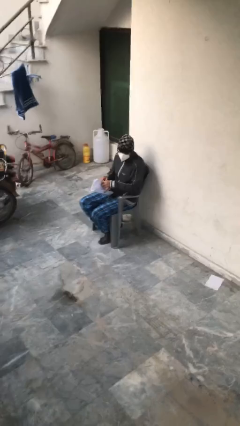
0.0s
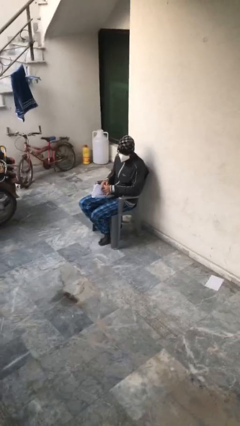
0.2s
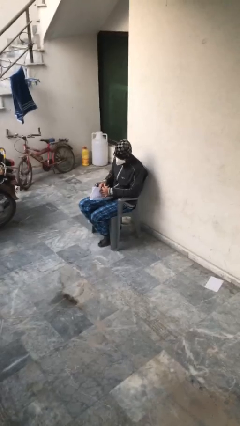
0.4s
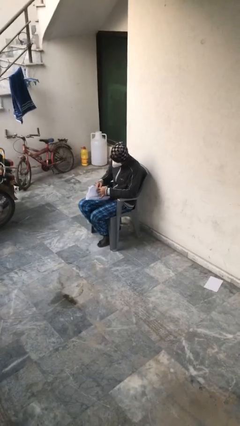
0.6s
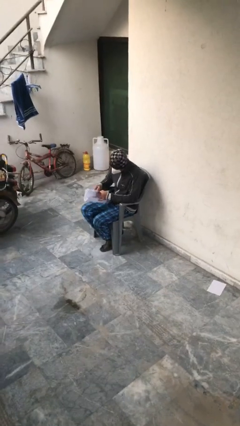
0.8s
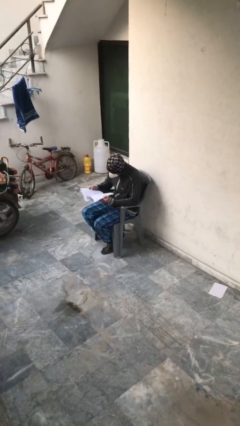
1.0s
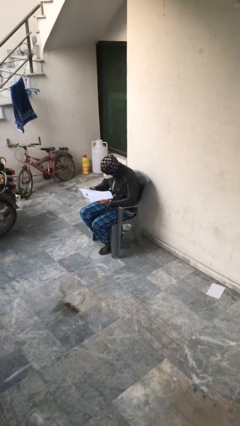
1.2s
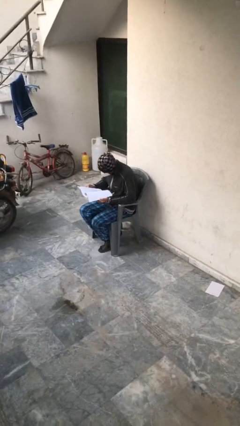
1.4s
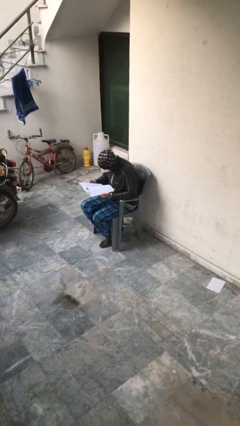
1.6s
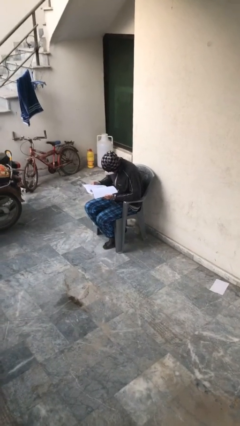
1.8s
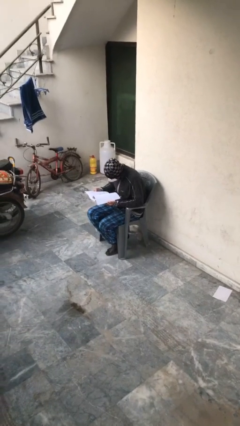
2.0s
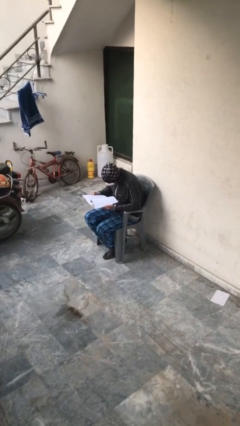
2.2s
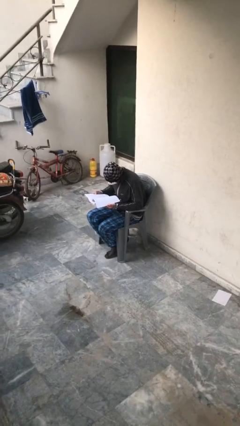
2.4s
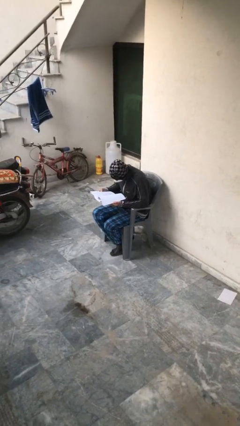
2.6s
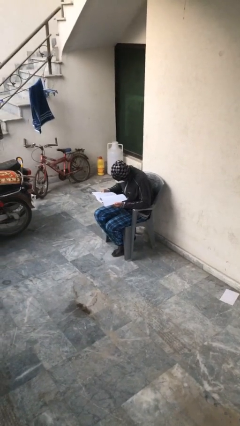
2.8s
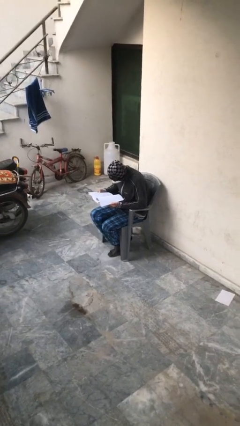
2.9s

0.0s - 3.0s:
person reads document

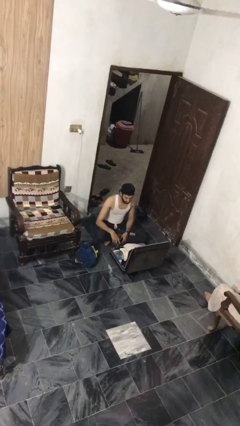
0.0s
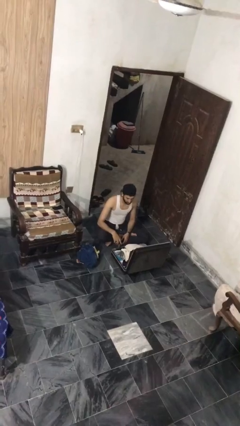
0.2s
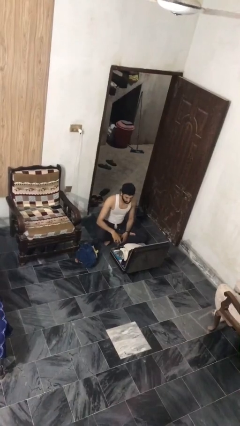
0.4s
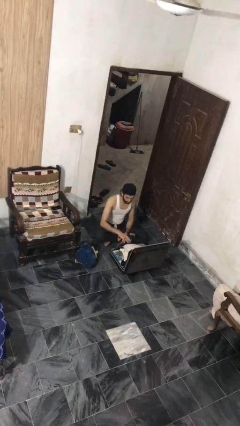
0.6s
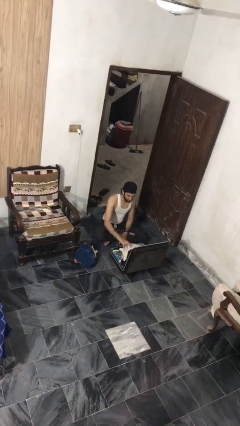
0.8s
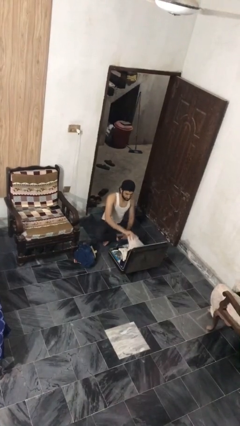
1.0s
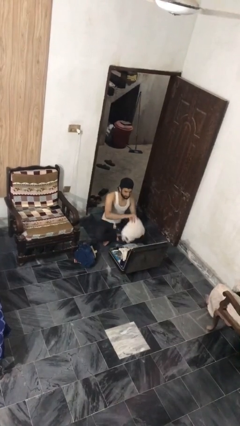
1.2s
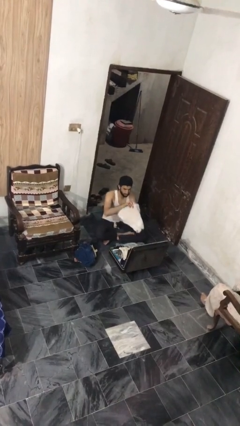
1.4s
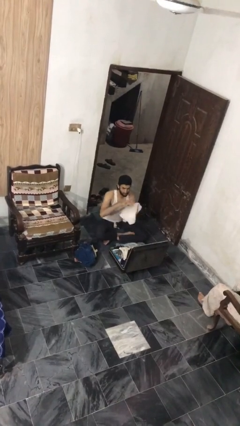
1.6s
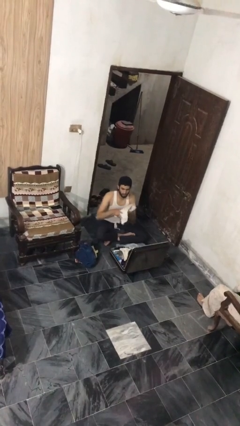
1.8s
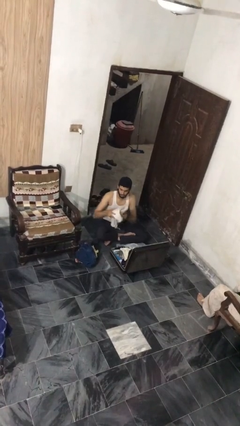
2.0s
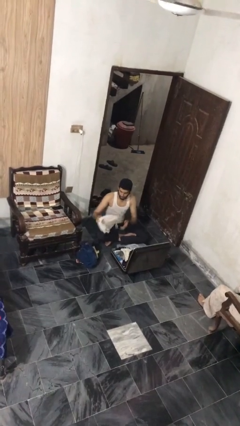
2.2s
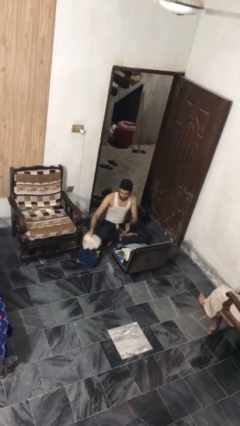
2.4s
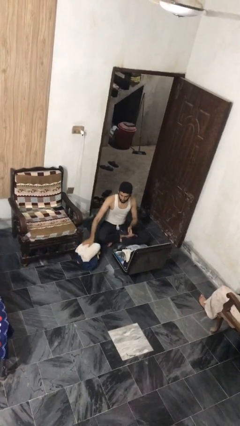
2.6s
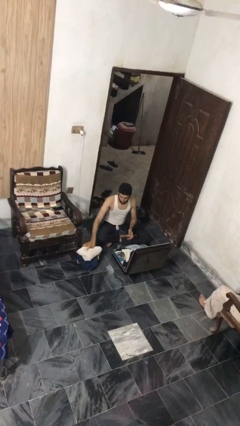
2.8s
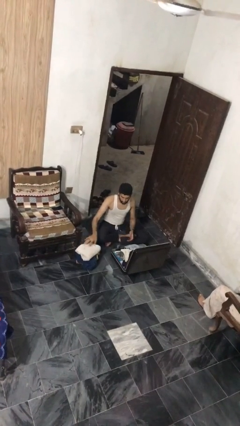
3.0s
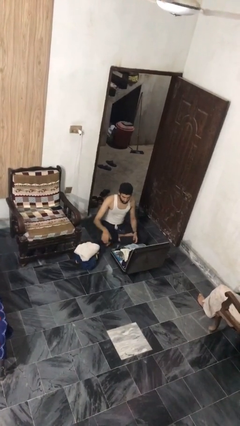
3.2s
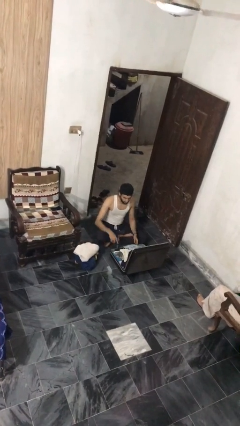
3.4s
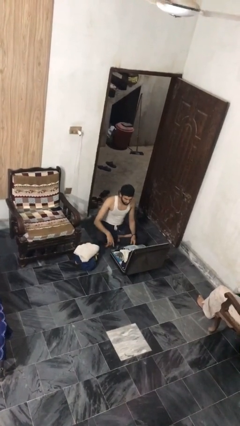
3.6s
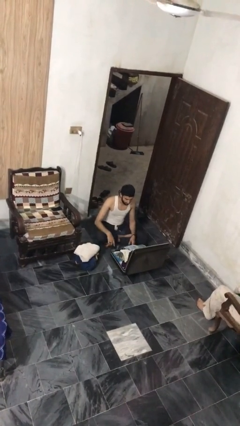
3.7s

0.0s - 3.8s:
person unloads clothes from suitcase

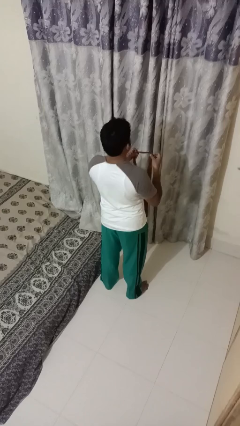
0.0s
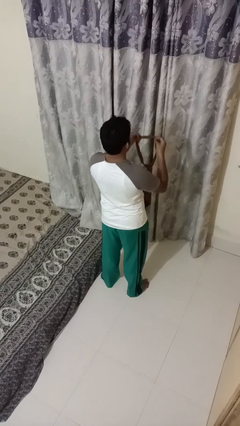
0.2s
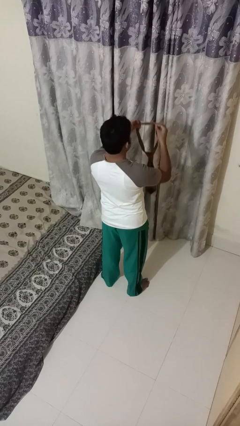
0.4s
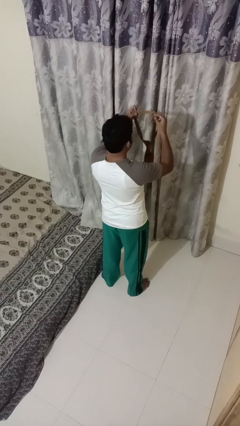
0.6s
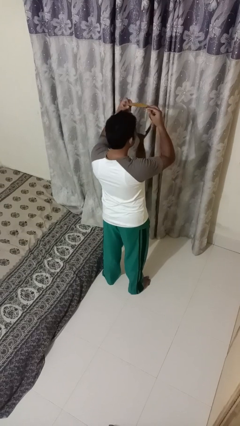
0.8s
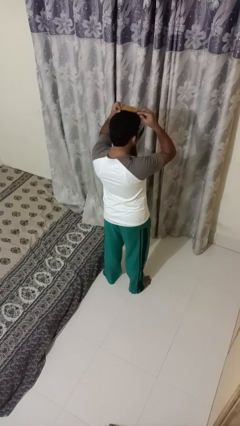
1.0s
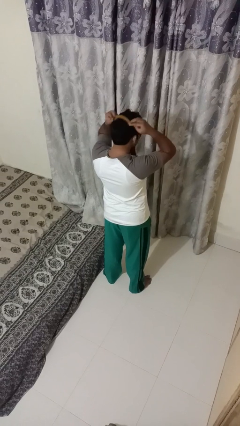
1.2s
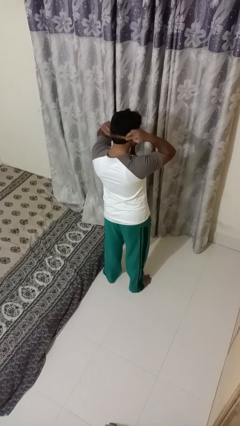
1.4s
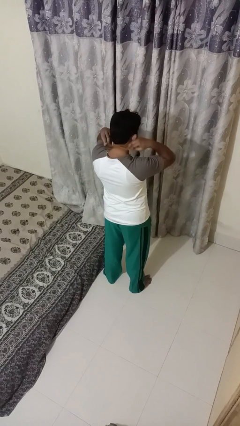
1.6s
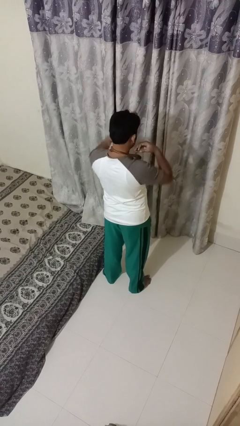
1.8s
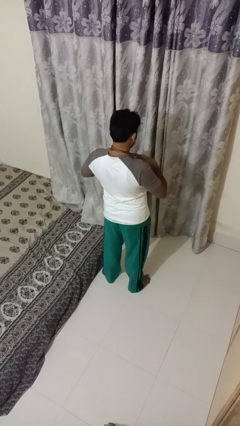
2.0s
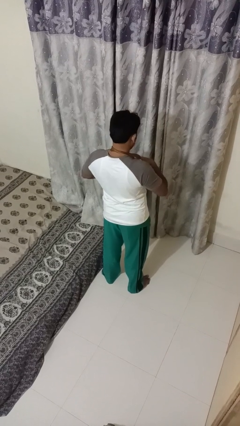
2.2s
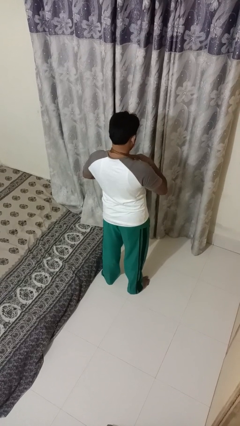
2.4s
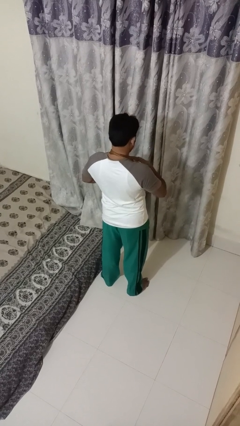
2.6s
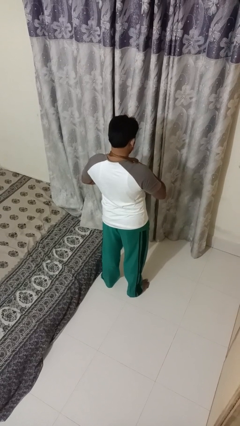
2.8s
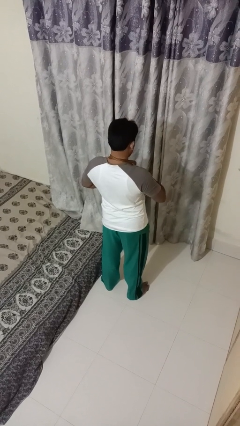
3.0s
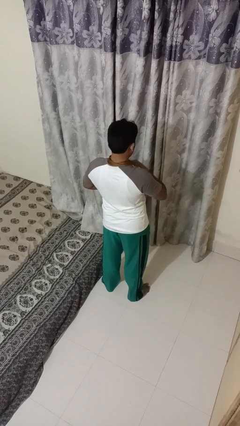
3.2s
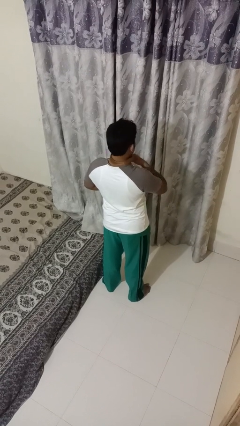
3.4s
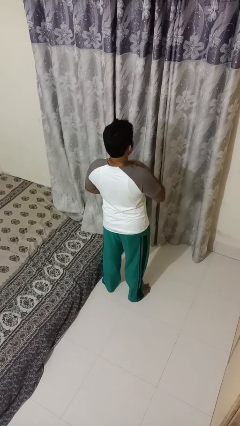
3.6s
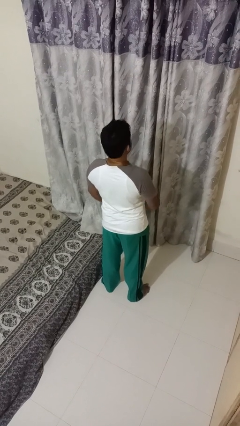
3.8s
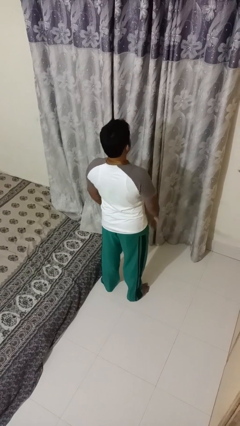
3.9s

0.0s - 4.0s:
person puts on necktie

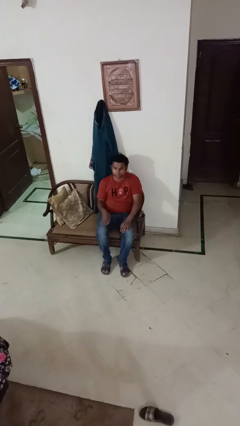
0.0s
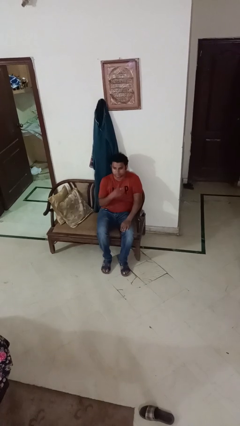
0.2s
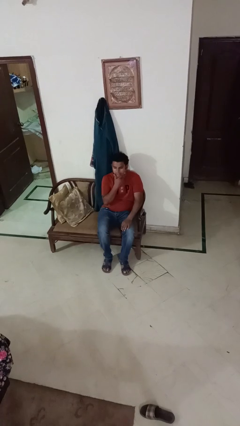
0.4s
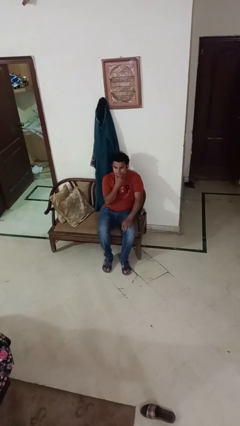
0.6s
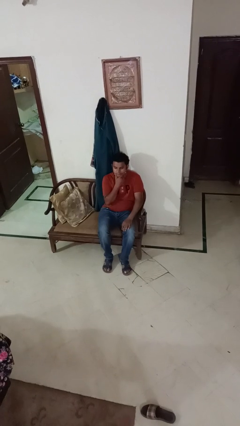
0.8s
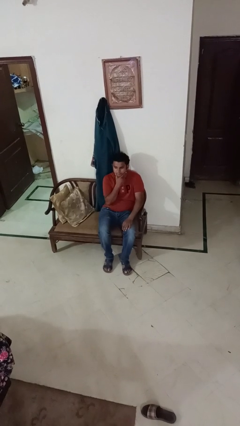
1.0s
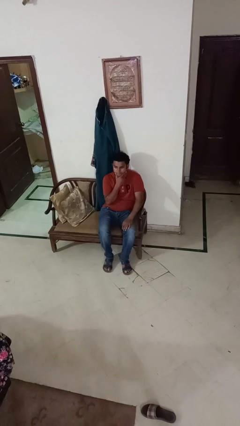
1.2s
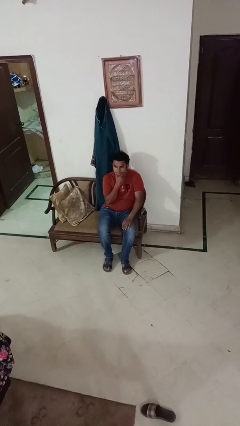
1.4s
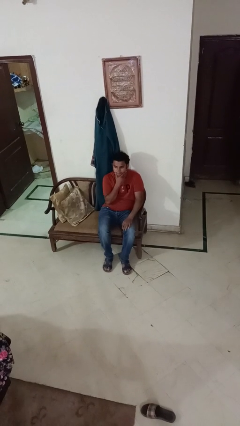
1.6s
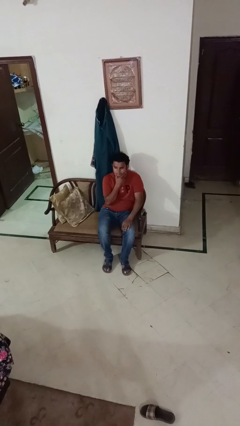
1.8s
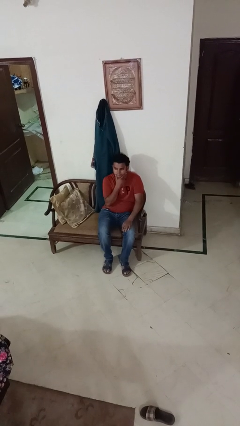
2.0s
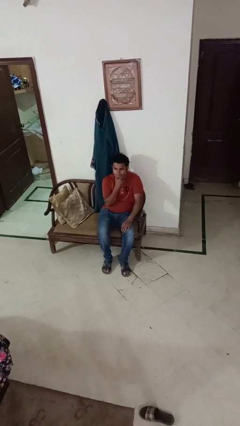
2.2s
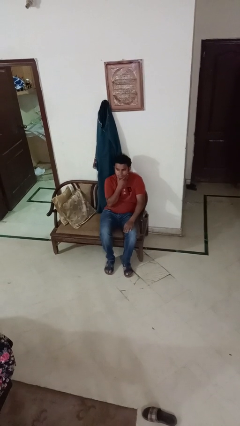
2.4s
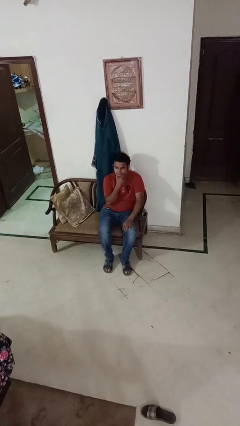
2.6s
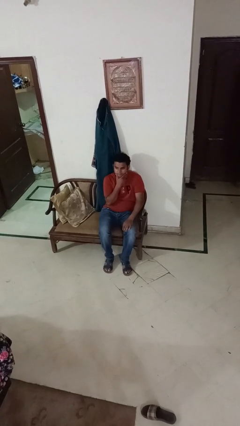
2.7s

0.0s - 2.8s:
person strokes chin

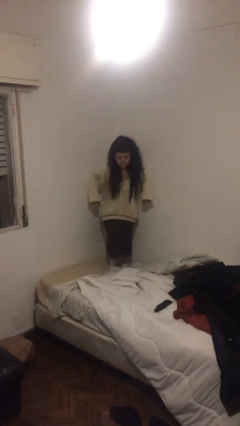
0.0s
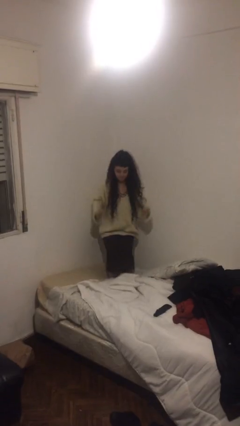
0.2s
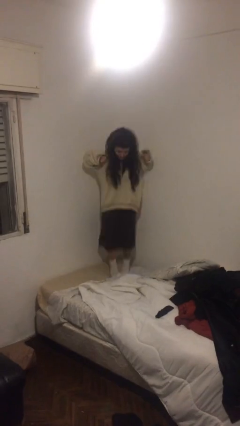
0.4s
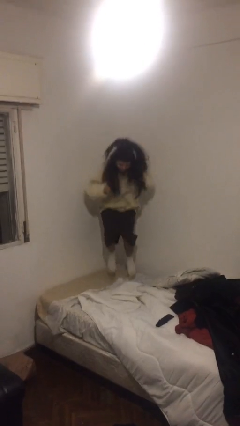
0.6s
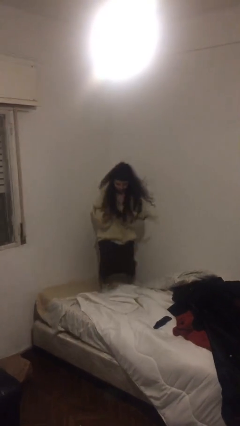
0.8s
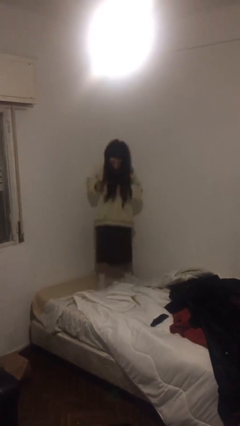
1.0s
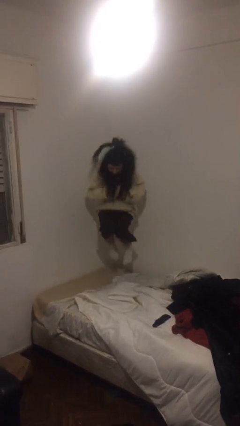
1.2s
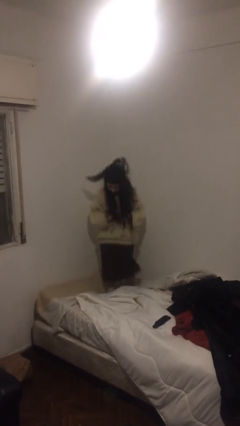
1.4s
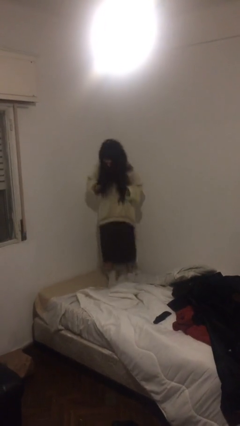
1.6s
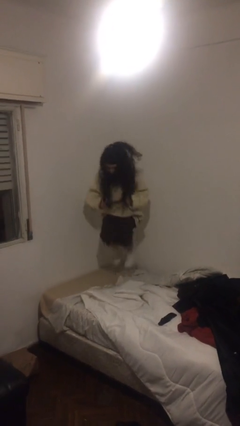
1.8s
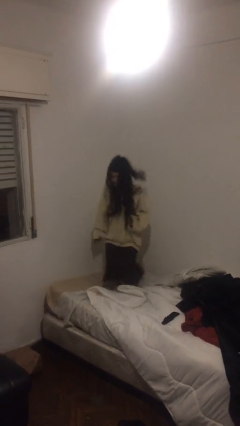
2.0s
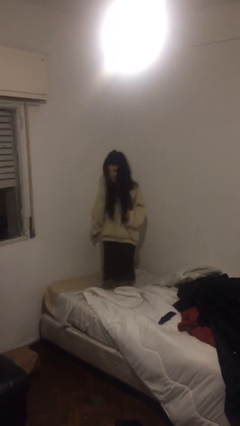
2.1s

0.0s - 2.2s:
person jumps on bed

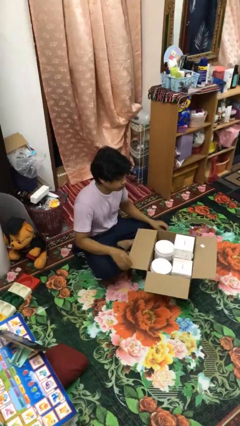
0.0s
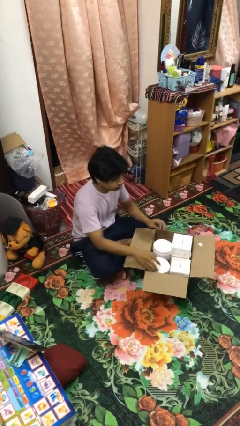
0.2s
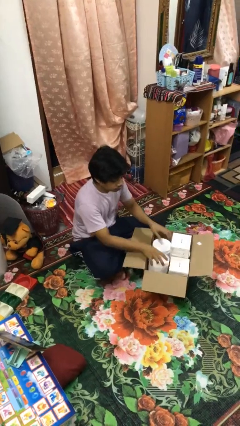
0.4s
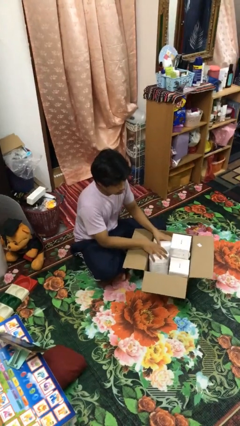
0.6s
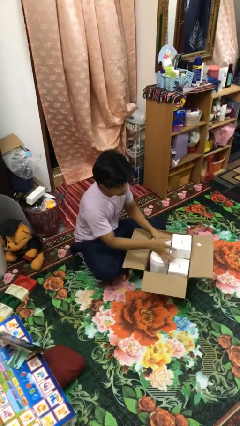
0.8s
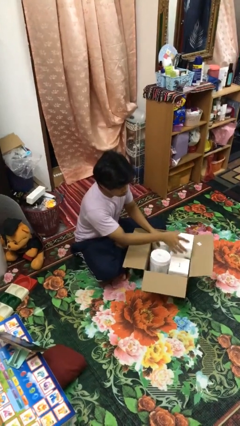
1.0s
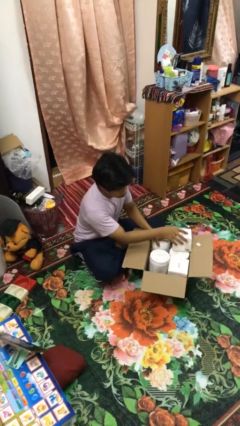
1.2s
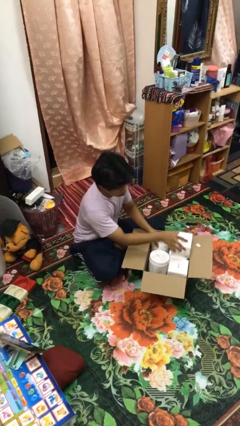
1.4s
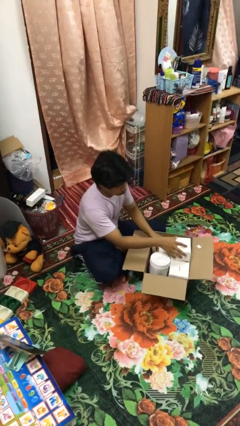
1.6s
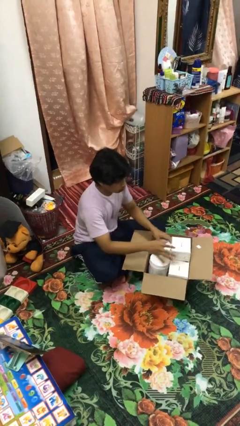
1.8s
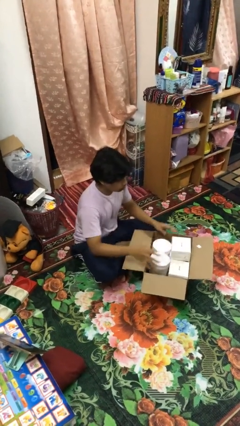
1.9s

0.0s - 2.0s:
person searches in box
